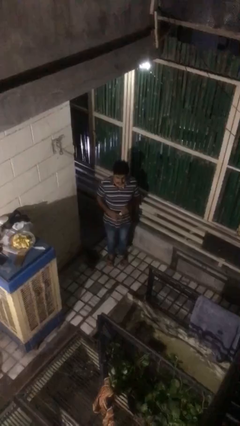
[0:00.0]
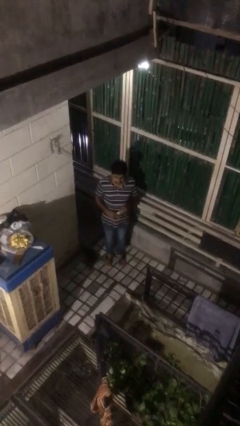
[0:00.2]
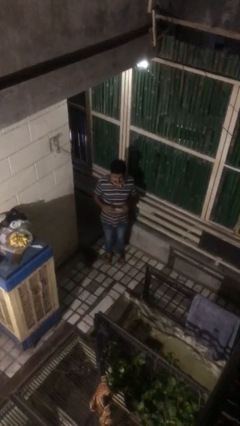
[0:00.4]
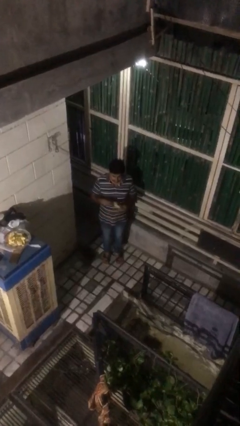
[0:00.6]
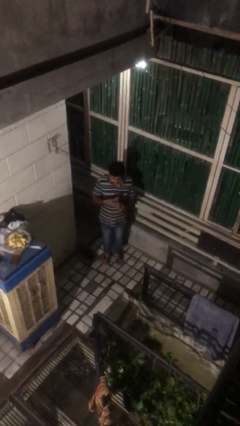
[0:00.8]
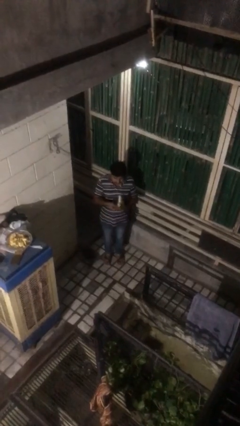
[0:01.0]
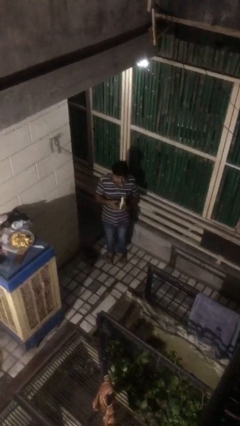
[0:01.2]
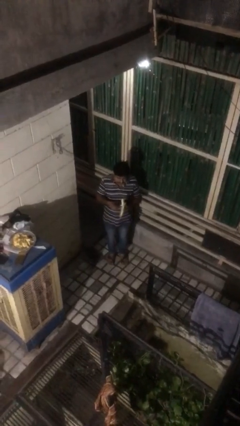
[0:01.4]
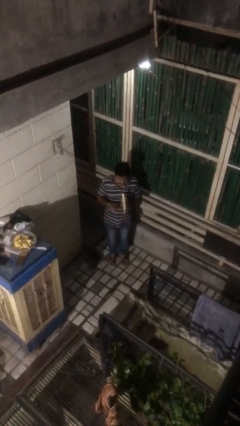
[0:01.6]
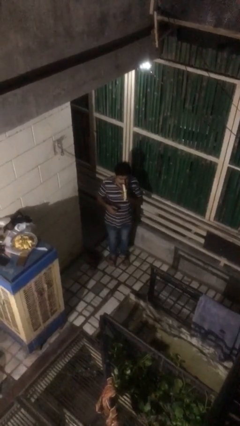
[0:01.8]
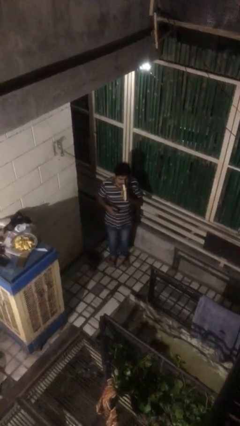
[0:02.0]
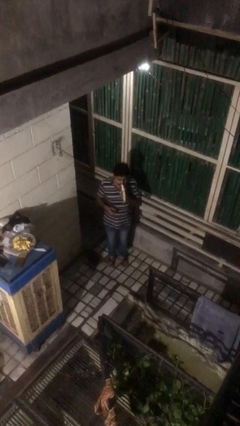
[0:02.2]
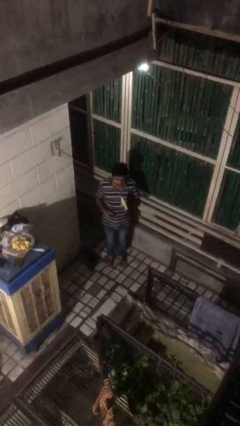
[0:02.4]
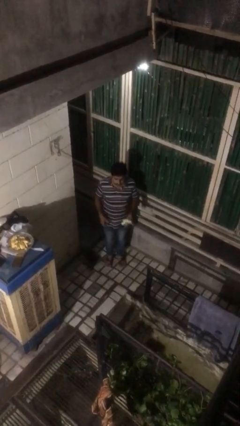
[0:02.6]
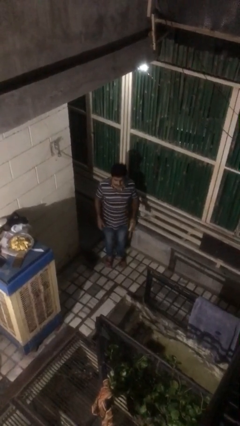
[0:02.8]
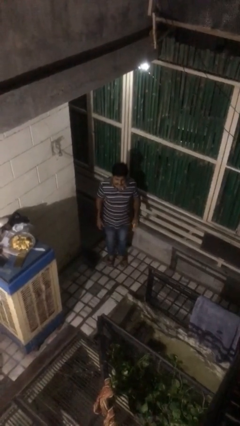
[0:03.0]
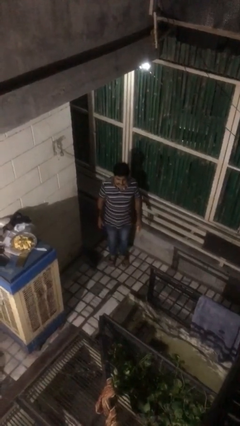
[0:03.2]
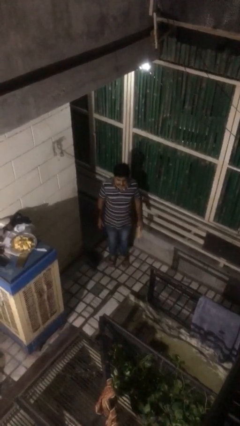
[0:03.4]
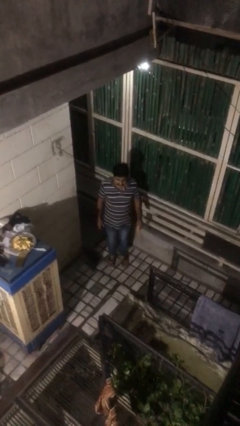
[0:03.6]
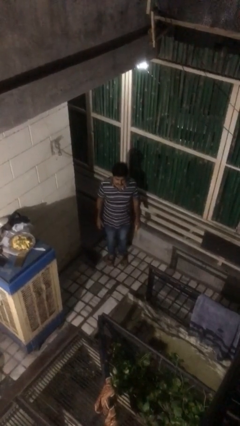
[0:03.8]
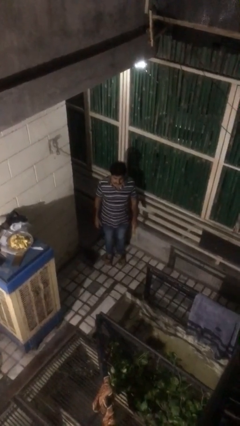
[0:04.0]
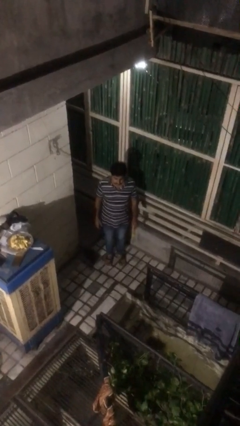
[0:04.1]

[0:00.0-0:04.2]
person eats banana

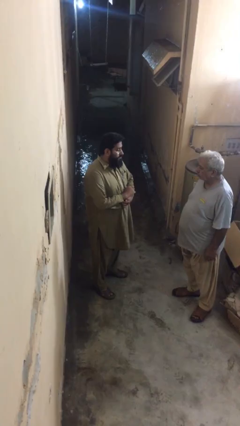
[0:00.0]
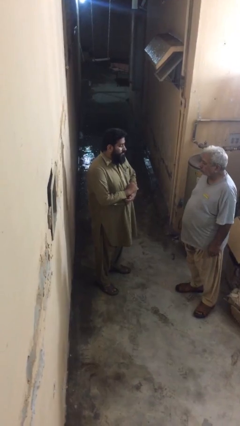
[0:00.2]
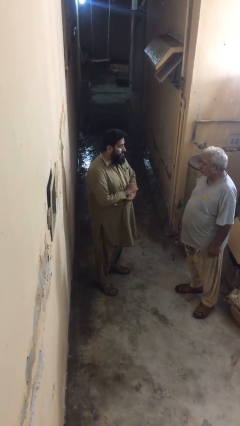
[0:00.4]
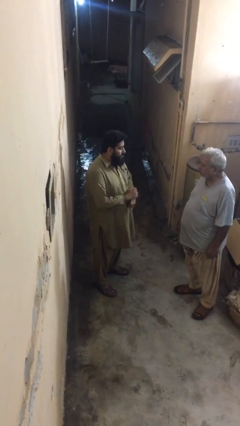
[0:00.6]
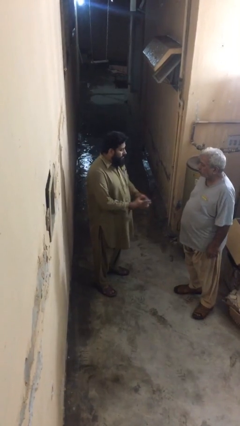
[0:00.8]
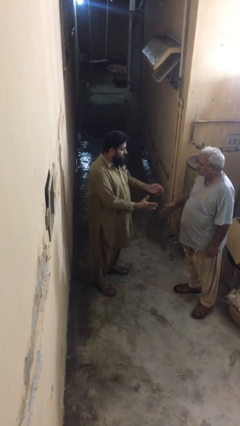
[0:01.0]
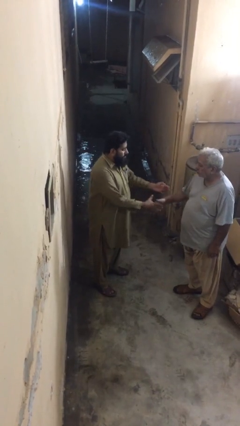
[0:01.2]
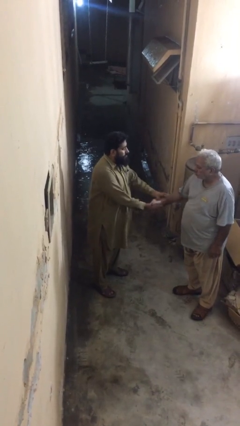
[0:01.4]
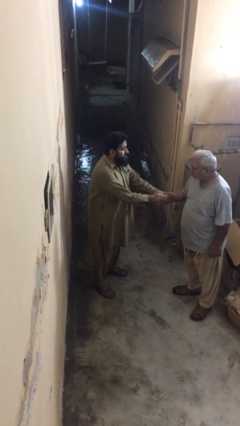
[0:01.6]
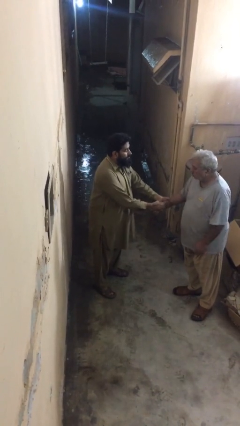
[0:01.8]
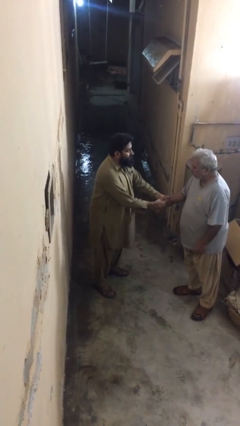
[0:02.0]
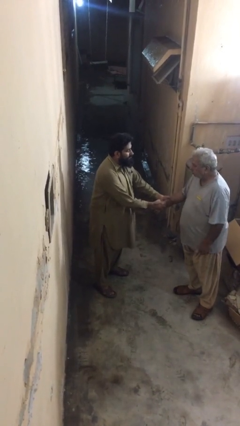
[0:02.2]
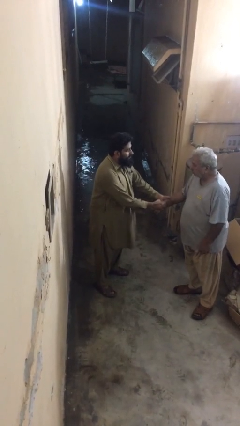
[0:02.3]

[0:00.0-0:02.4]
person shakes hand

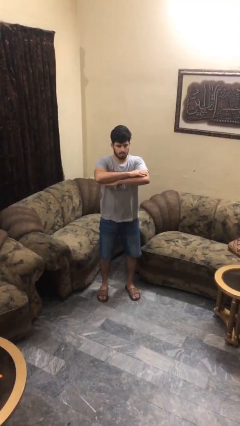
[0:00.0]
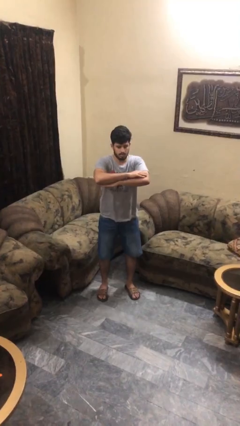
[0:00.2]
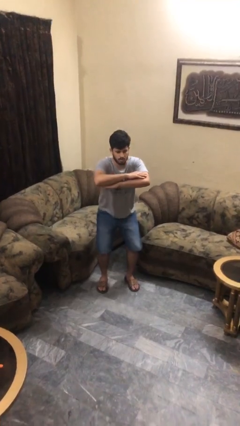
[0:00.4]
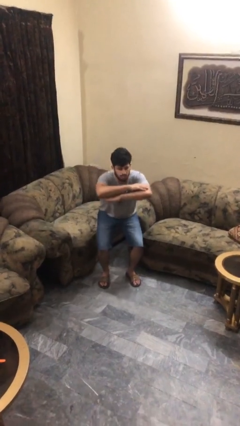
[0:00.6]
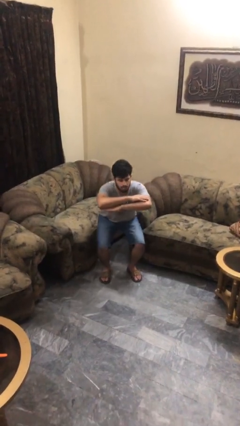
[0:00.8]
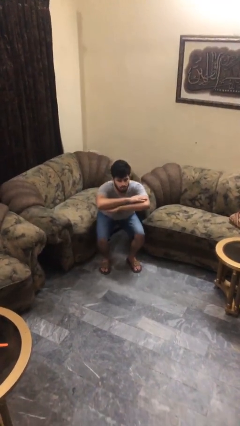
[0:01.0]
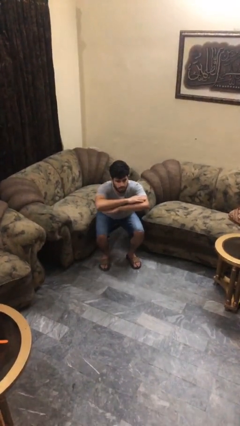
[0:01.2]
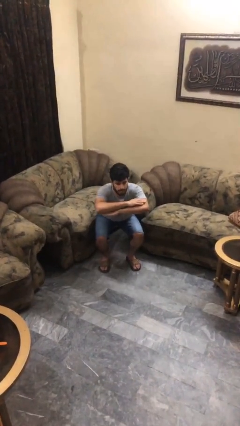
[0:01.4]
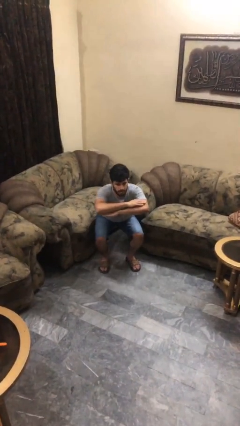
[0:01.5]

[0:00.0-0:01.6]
person squats

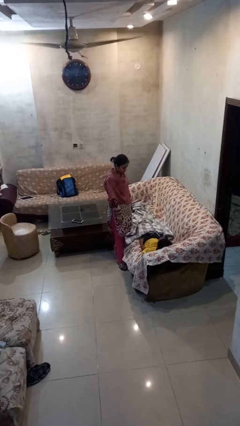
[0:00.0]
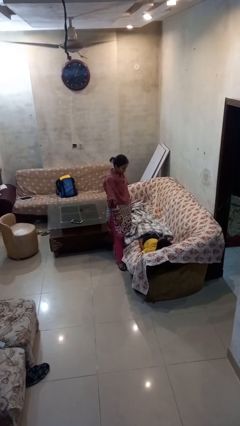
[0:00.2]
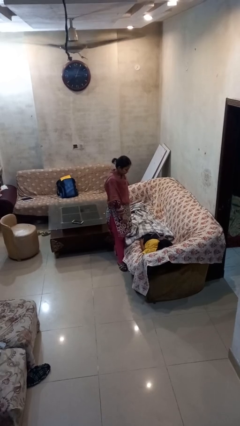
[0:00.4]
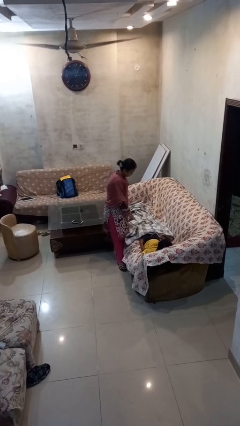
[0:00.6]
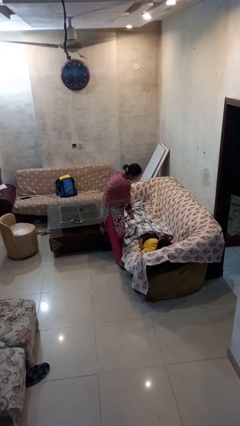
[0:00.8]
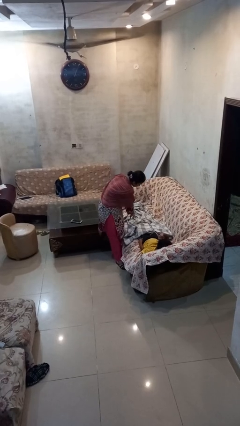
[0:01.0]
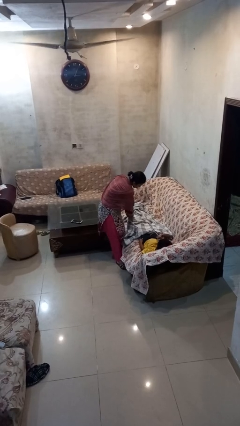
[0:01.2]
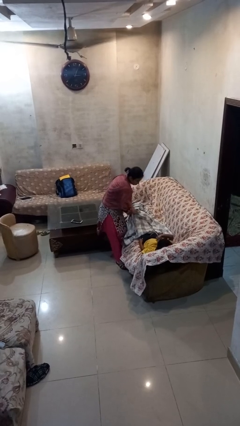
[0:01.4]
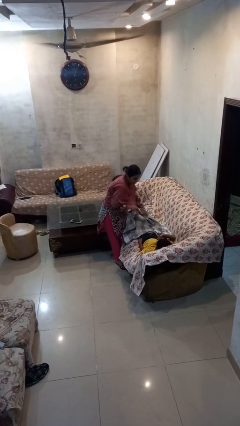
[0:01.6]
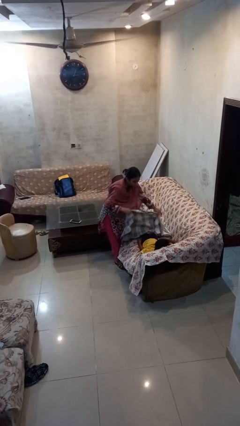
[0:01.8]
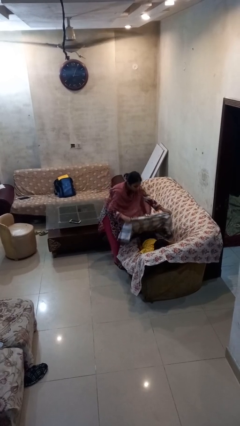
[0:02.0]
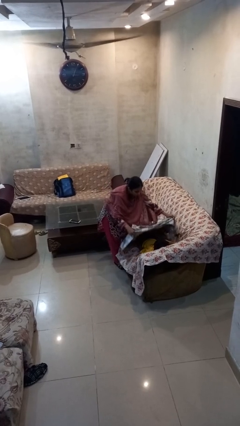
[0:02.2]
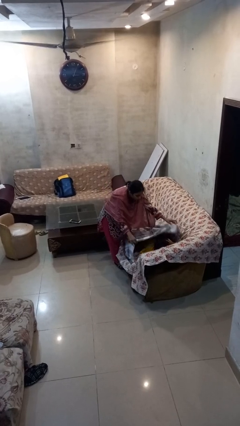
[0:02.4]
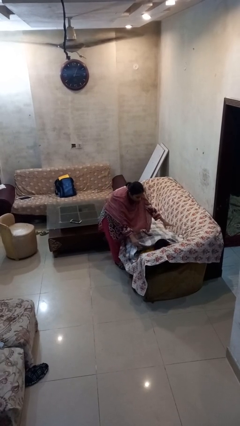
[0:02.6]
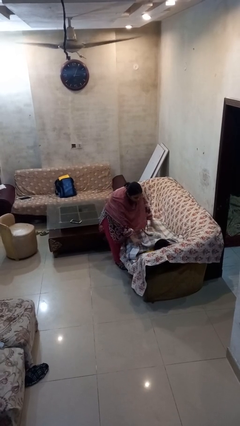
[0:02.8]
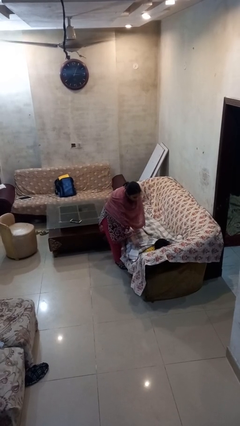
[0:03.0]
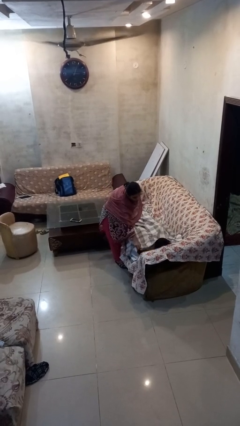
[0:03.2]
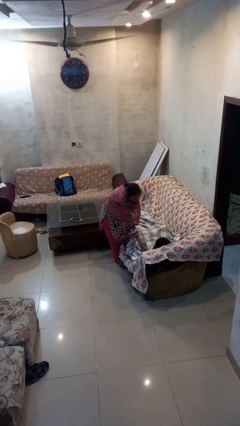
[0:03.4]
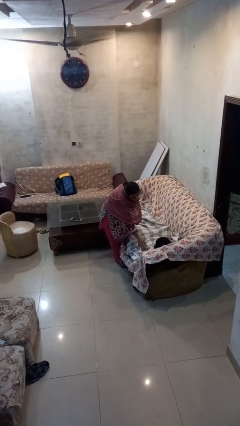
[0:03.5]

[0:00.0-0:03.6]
person covers friend with blanket

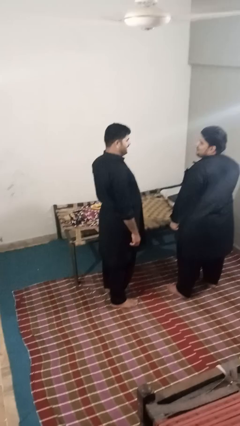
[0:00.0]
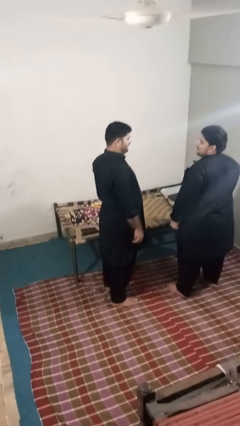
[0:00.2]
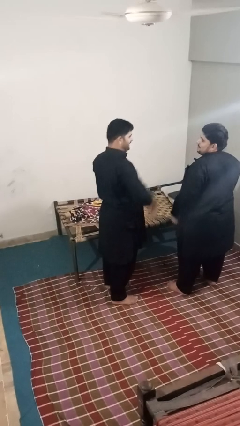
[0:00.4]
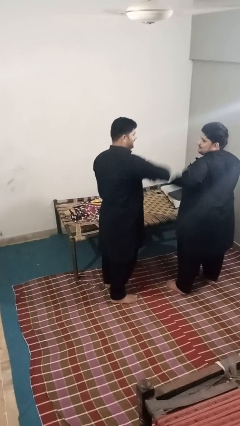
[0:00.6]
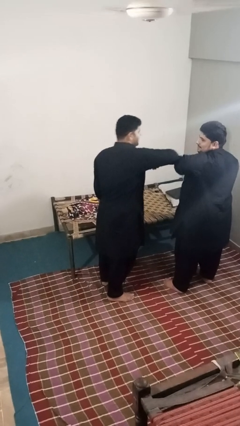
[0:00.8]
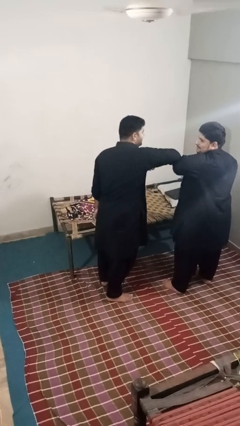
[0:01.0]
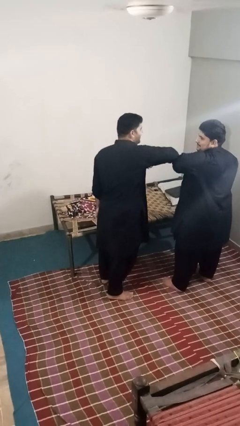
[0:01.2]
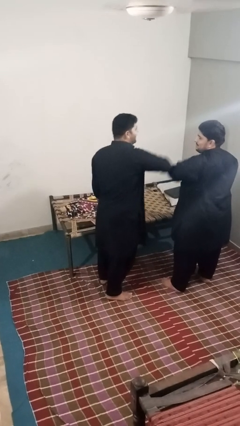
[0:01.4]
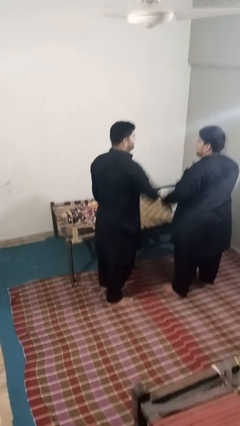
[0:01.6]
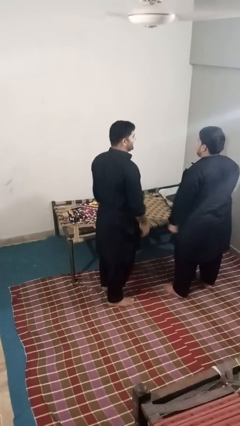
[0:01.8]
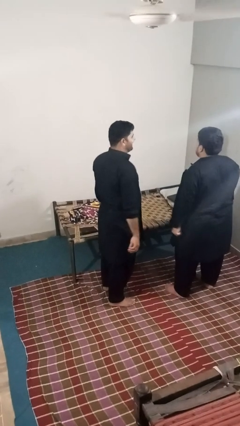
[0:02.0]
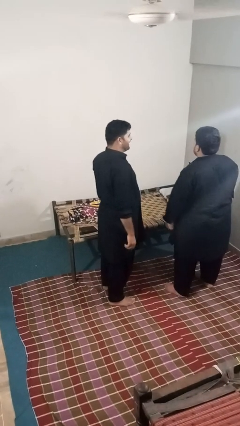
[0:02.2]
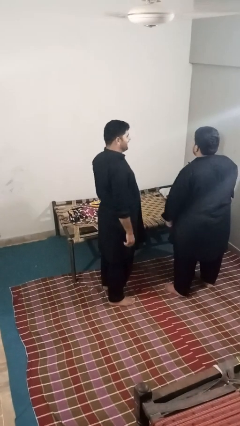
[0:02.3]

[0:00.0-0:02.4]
person nudges person with elbow

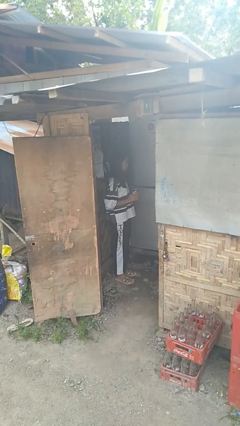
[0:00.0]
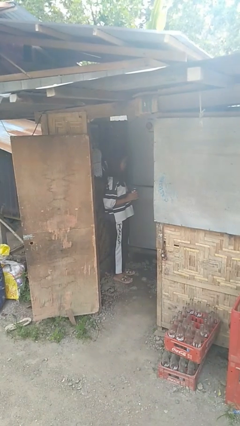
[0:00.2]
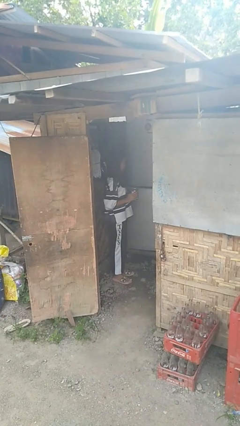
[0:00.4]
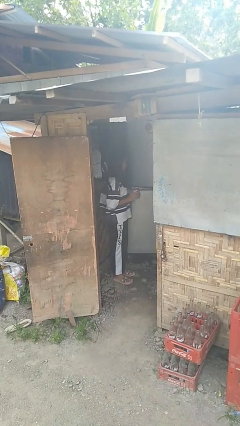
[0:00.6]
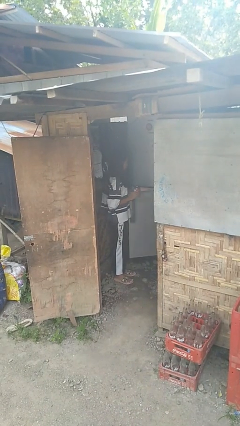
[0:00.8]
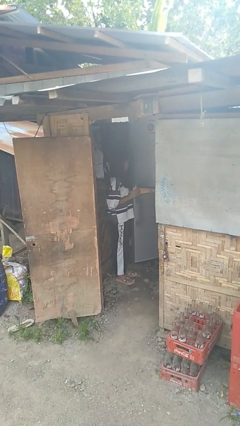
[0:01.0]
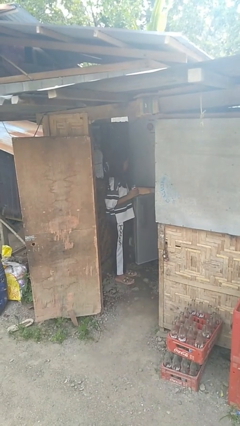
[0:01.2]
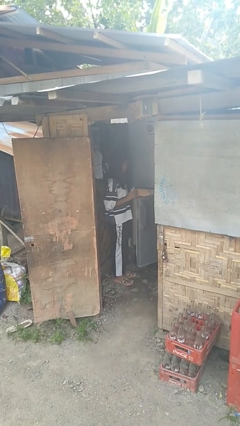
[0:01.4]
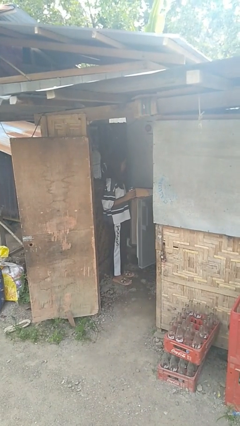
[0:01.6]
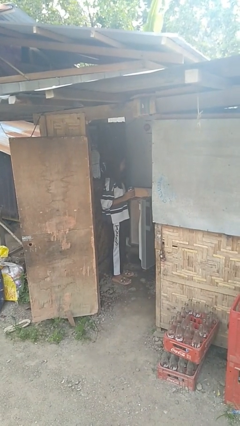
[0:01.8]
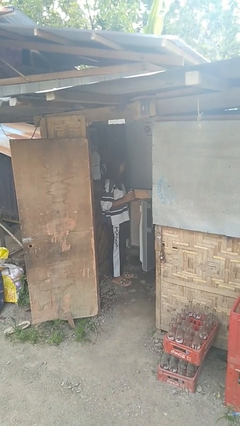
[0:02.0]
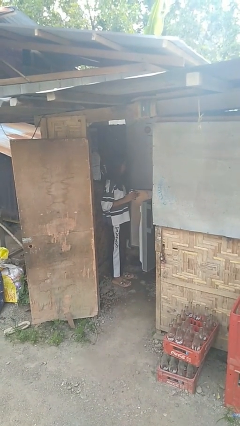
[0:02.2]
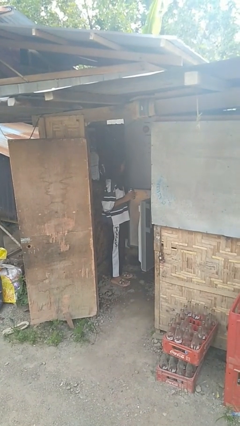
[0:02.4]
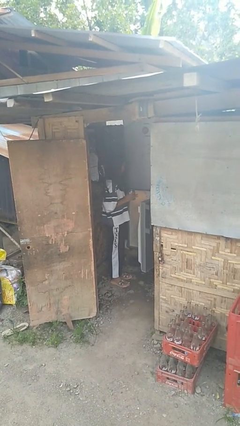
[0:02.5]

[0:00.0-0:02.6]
person opens refrigerator

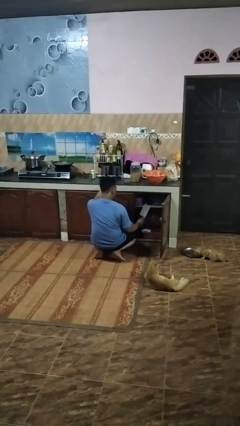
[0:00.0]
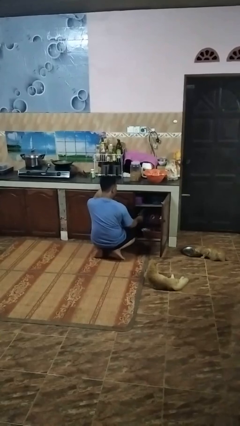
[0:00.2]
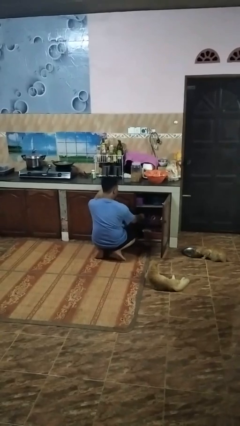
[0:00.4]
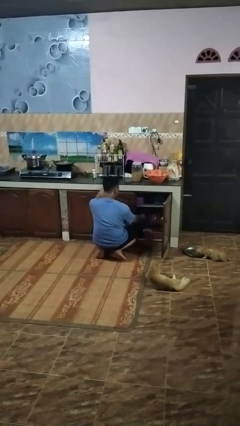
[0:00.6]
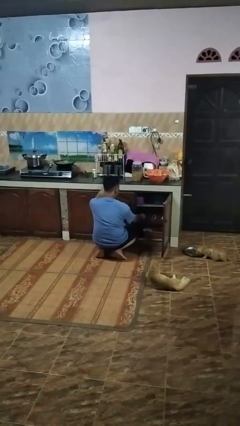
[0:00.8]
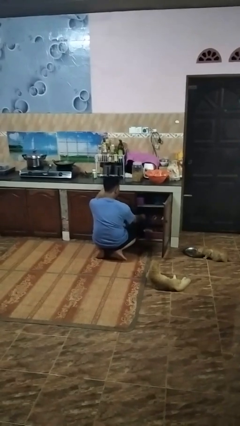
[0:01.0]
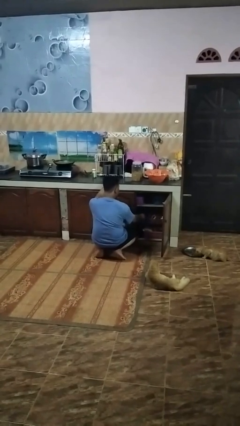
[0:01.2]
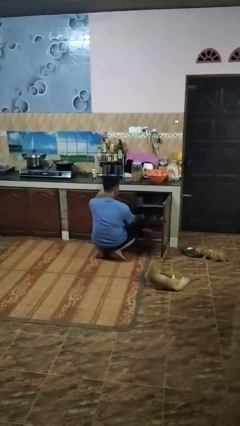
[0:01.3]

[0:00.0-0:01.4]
person puts object into kitchen drawer
